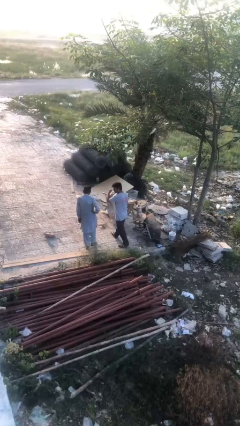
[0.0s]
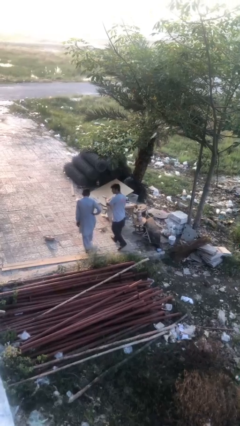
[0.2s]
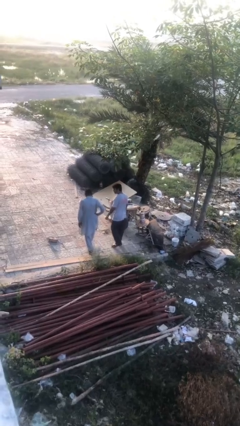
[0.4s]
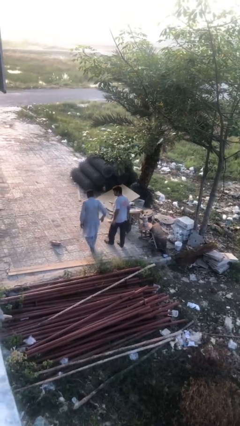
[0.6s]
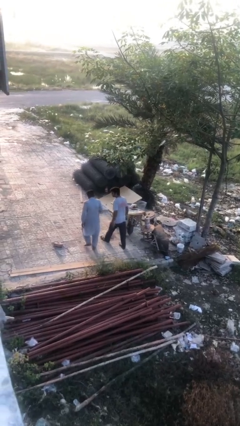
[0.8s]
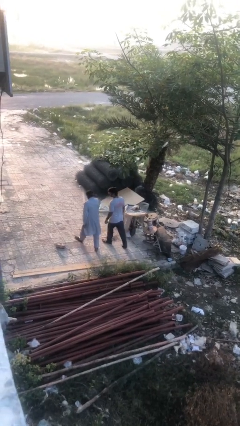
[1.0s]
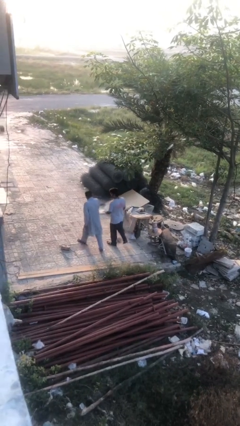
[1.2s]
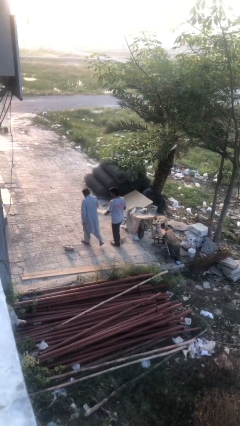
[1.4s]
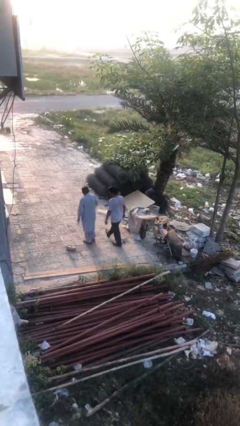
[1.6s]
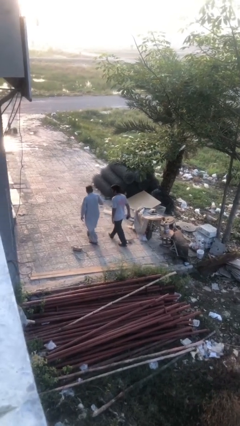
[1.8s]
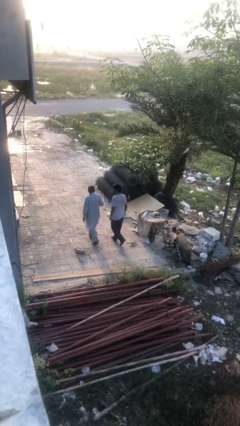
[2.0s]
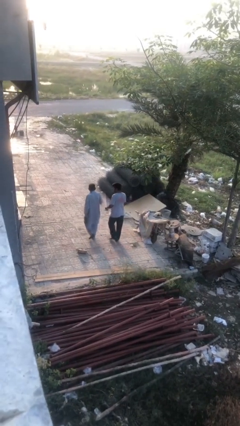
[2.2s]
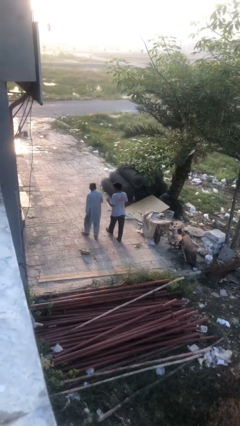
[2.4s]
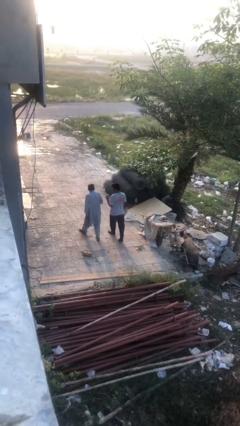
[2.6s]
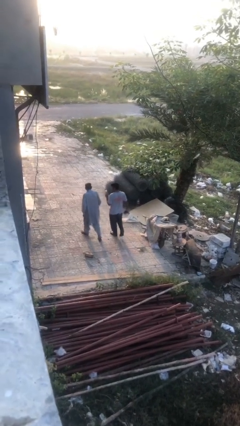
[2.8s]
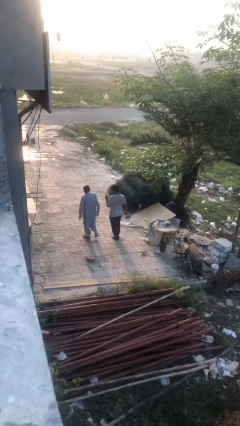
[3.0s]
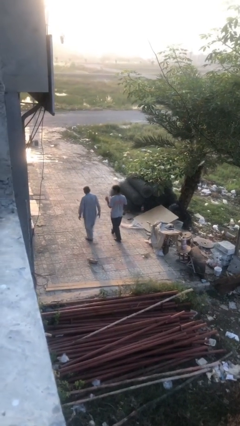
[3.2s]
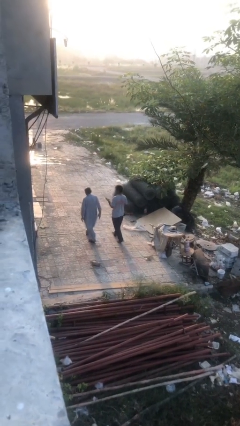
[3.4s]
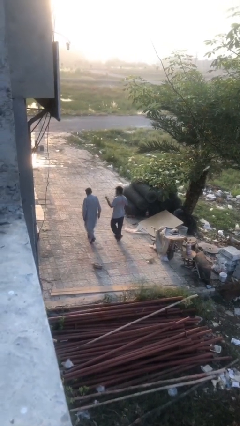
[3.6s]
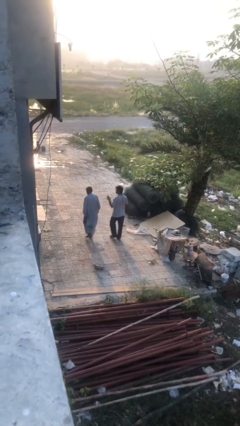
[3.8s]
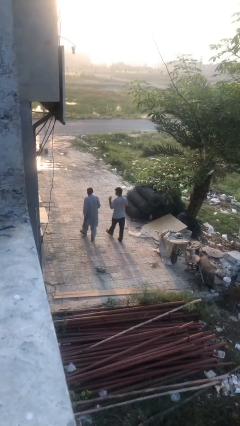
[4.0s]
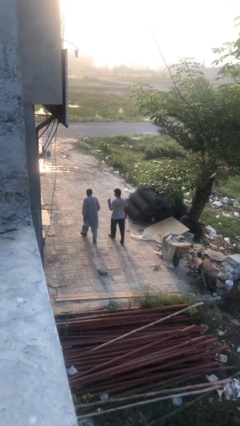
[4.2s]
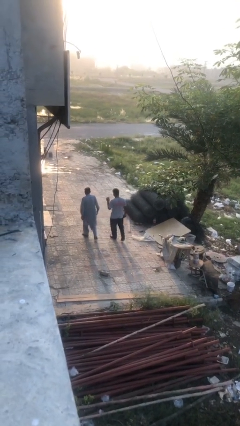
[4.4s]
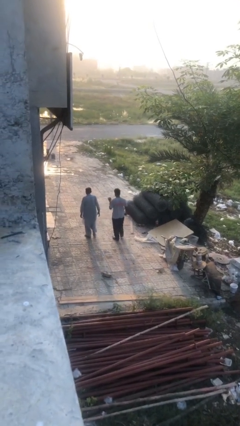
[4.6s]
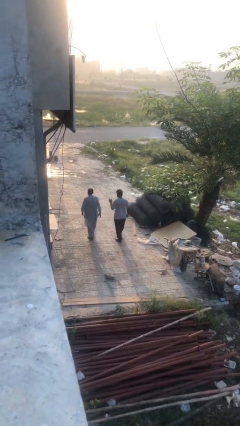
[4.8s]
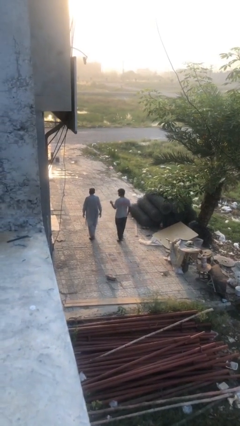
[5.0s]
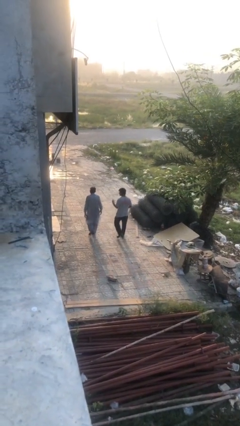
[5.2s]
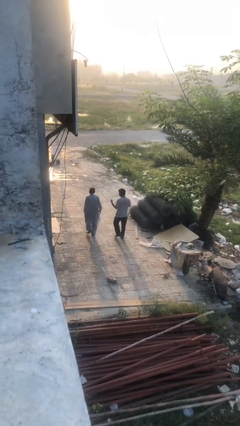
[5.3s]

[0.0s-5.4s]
person talks to person

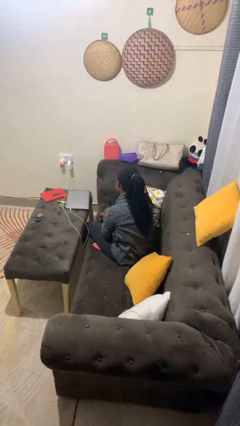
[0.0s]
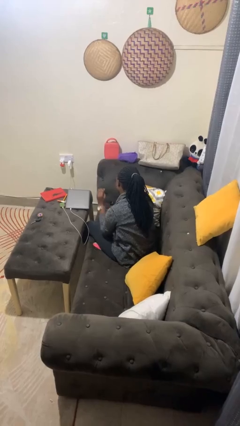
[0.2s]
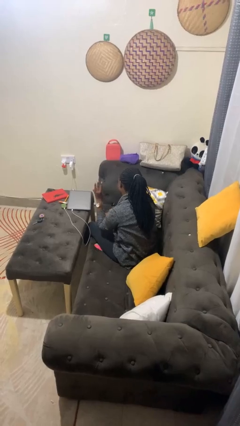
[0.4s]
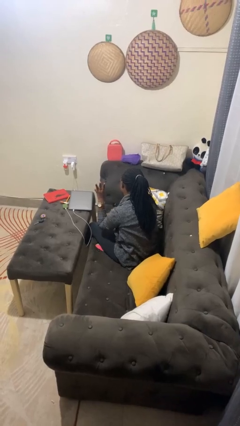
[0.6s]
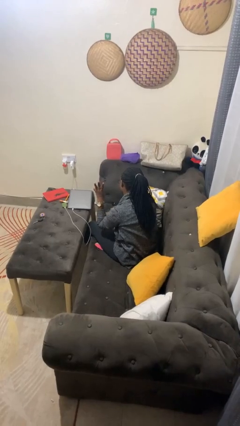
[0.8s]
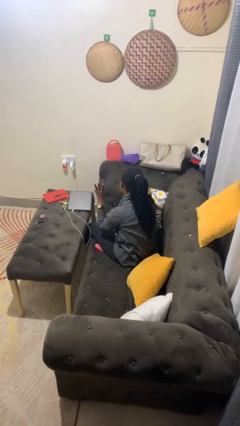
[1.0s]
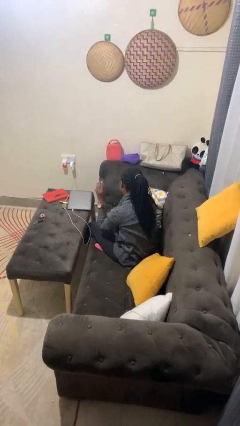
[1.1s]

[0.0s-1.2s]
person gestures number three

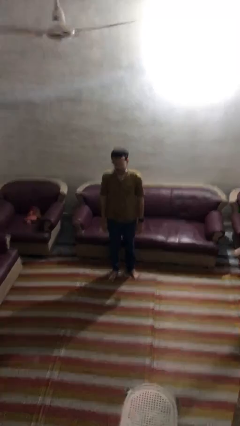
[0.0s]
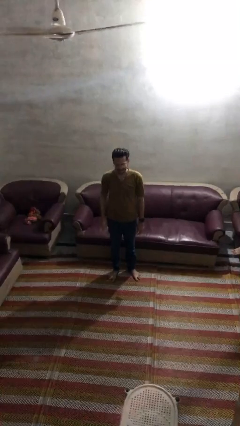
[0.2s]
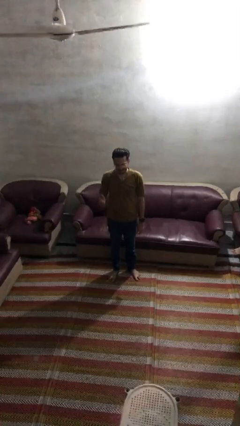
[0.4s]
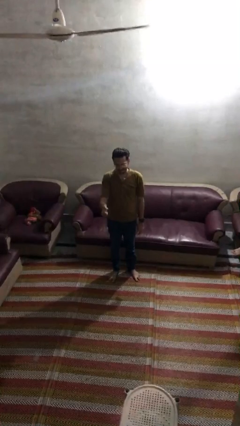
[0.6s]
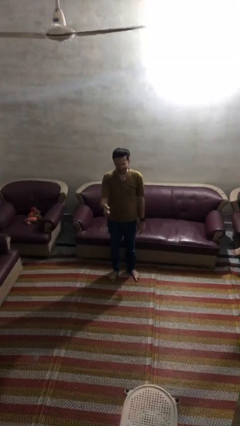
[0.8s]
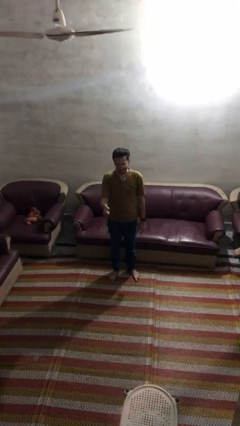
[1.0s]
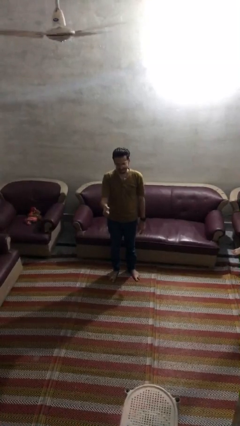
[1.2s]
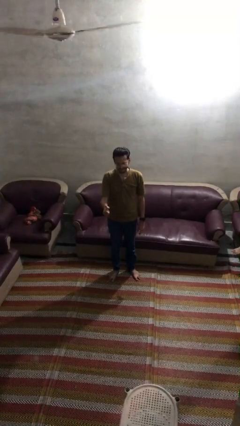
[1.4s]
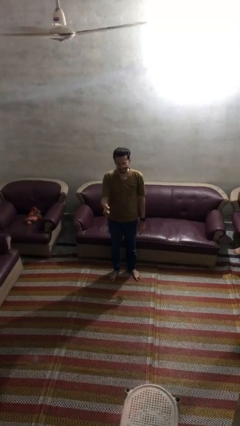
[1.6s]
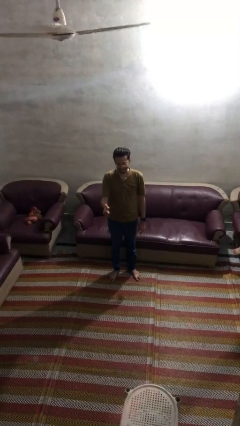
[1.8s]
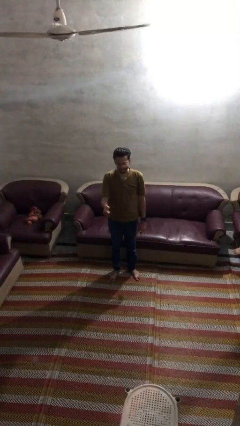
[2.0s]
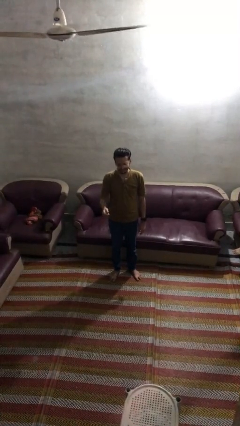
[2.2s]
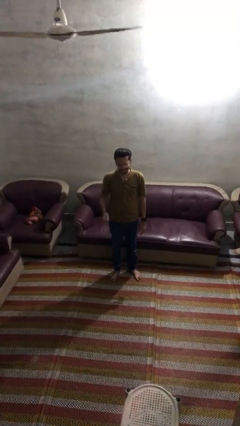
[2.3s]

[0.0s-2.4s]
person gestures thumbs up

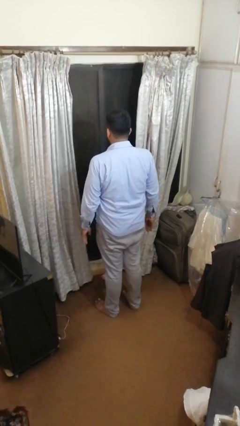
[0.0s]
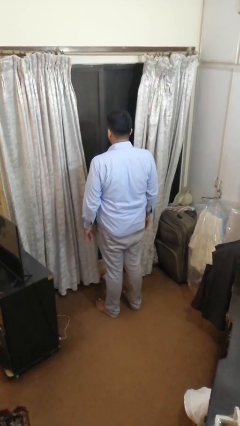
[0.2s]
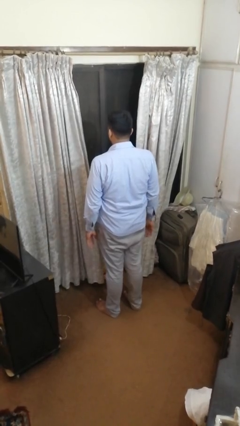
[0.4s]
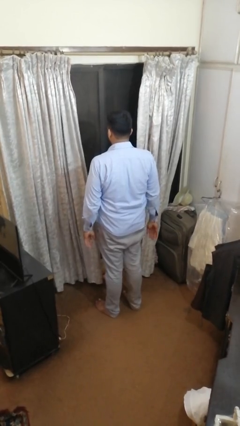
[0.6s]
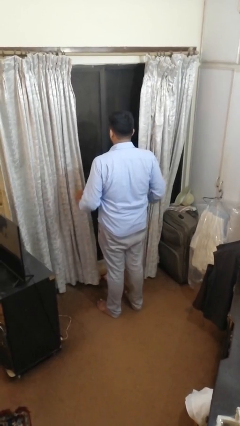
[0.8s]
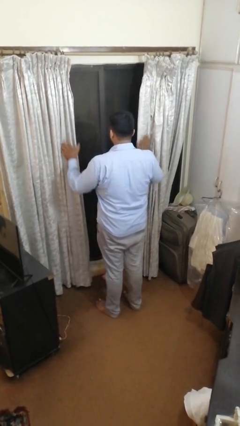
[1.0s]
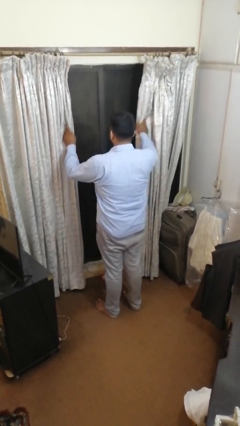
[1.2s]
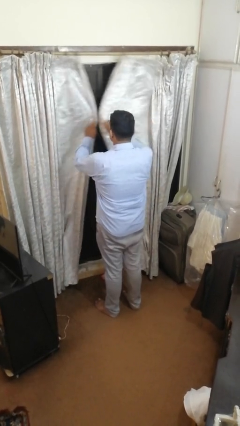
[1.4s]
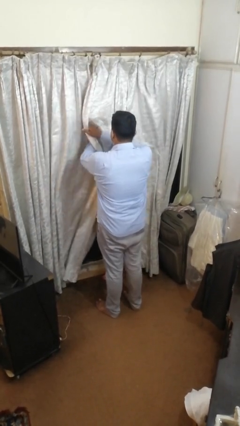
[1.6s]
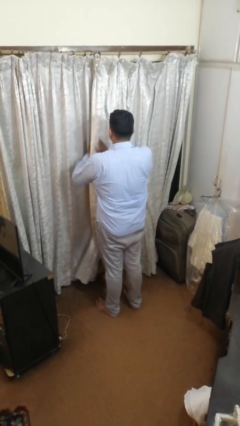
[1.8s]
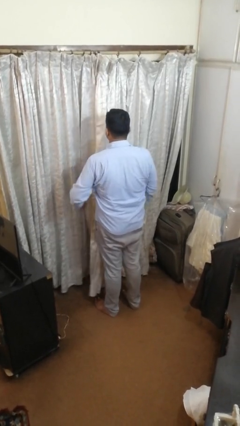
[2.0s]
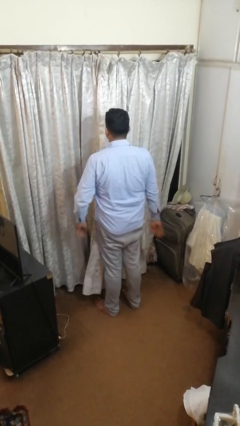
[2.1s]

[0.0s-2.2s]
person closes curtains

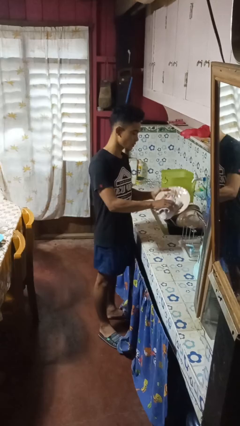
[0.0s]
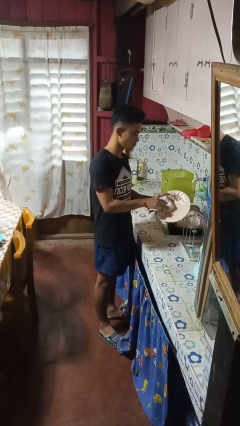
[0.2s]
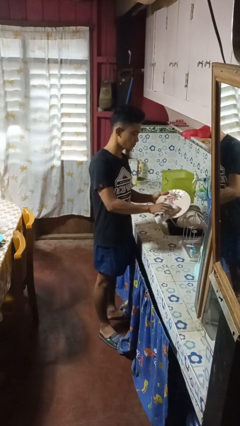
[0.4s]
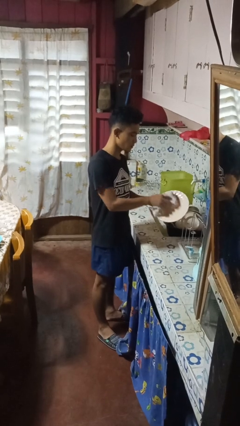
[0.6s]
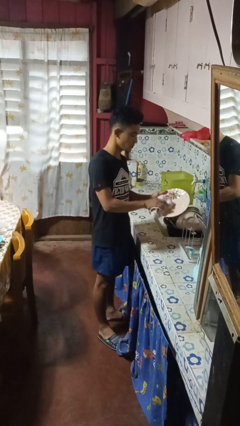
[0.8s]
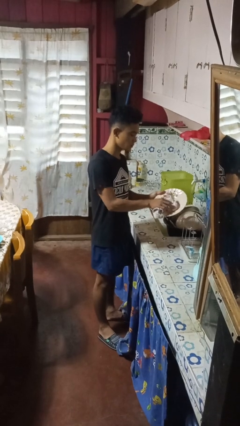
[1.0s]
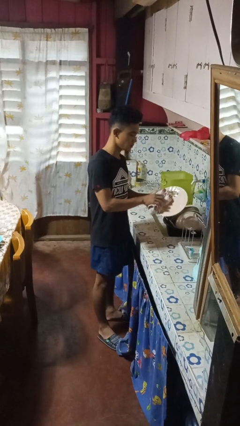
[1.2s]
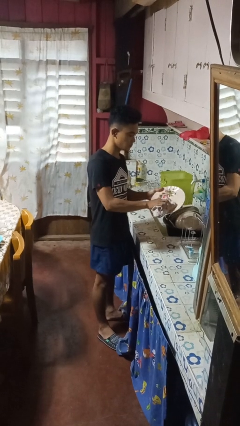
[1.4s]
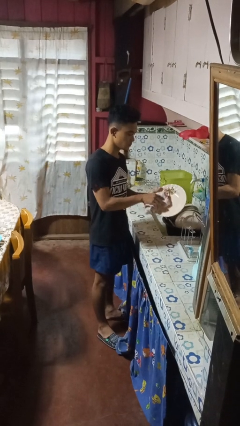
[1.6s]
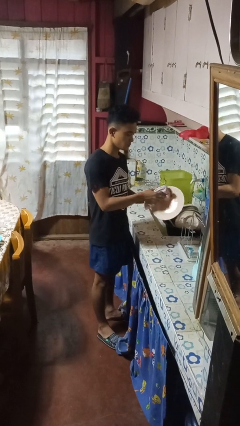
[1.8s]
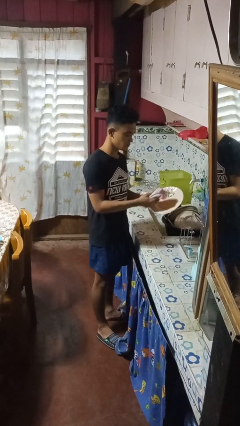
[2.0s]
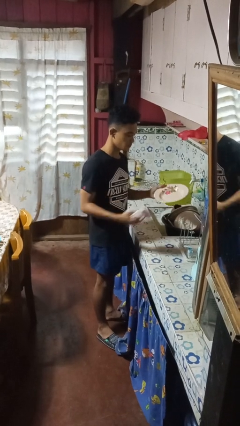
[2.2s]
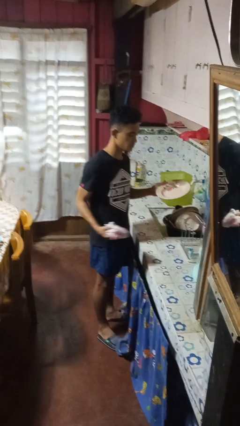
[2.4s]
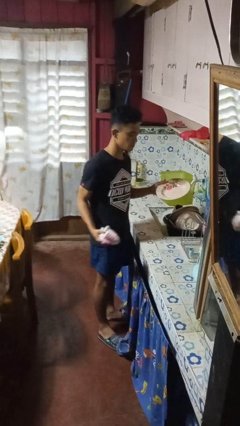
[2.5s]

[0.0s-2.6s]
person dries dish

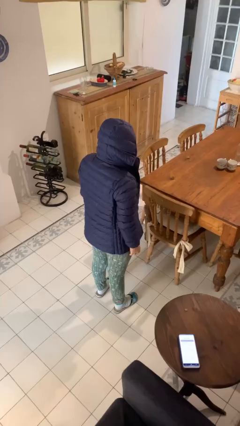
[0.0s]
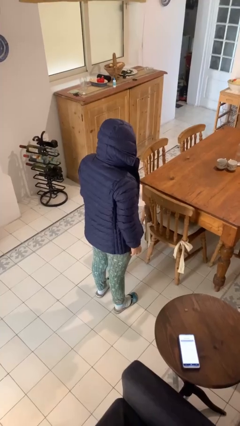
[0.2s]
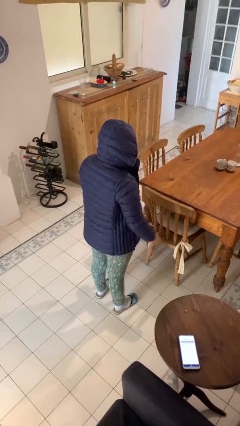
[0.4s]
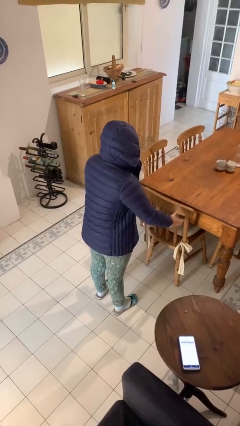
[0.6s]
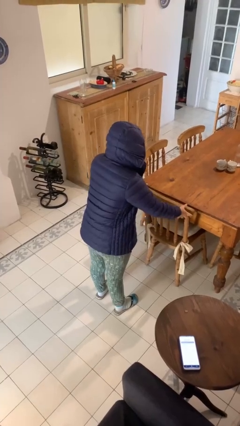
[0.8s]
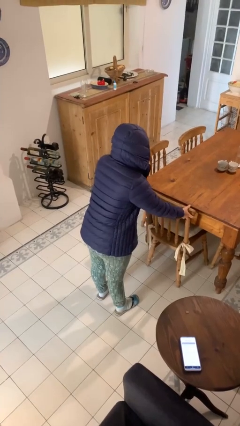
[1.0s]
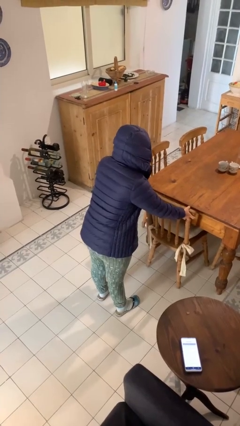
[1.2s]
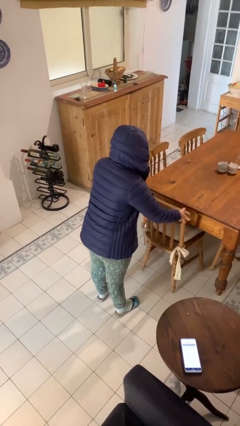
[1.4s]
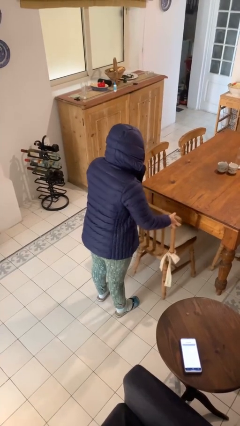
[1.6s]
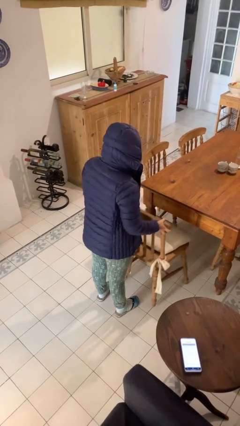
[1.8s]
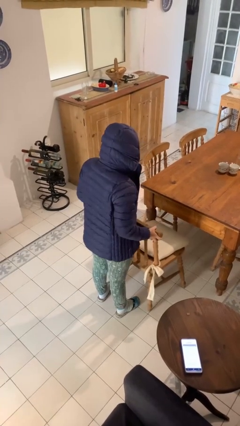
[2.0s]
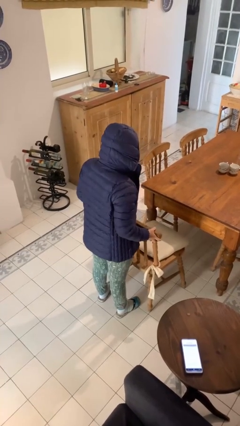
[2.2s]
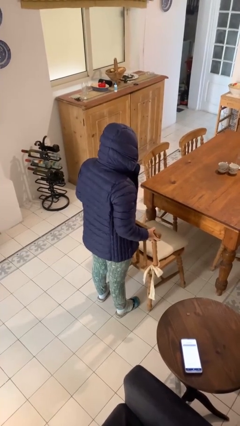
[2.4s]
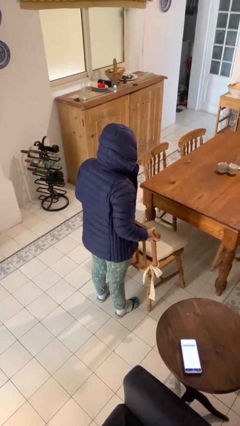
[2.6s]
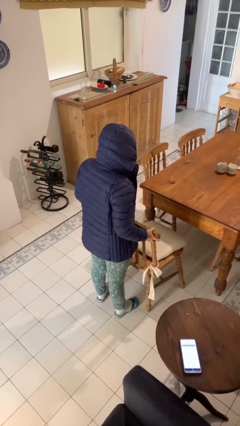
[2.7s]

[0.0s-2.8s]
person pulls out chair

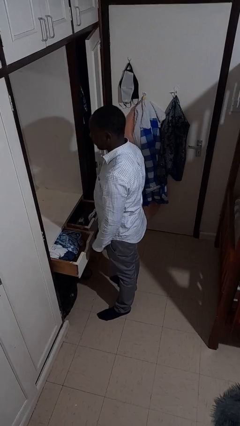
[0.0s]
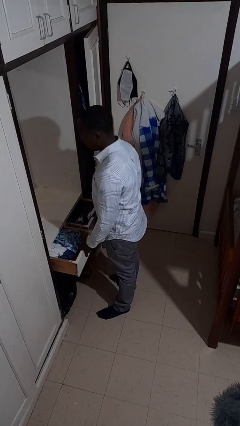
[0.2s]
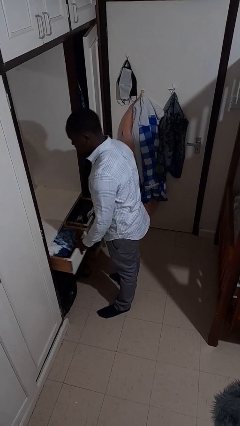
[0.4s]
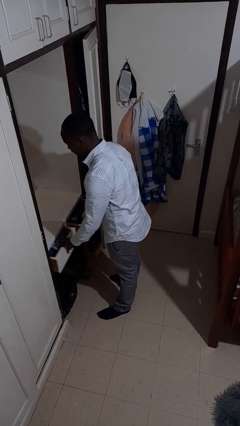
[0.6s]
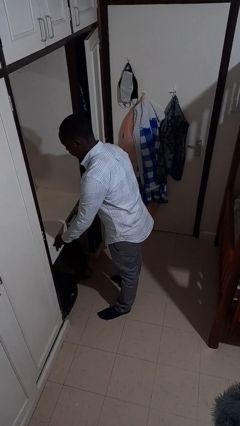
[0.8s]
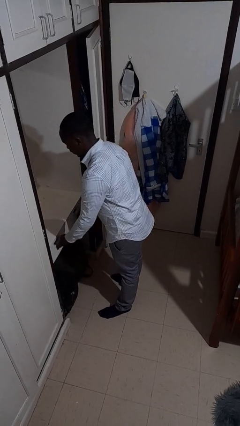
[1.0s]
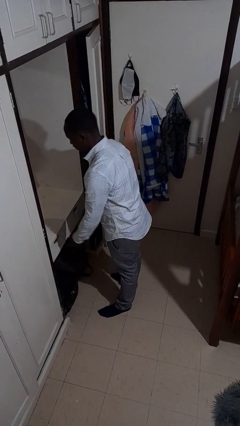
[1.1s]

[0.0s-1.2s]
person closes dresser drawer
